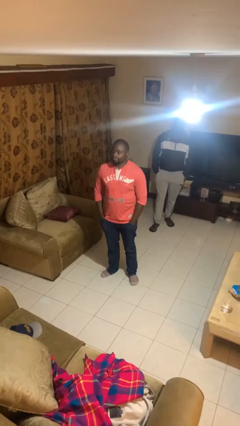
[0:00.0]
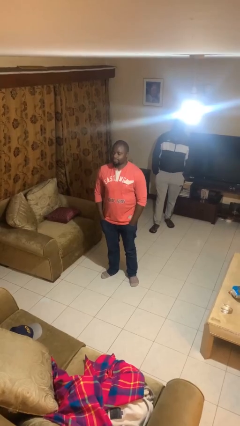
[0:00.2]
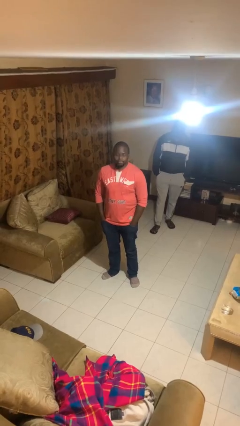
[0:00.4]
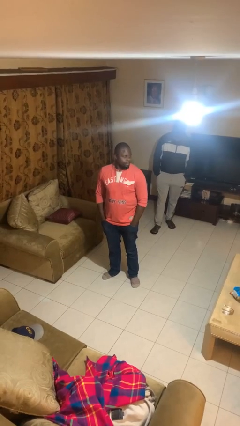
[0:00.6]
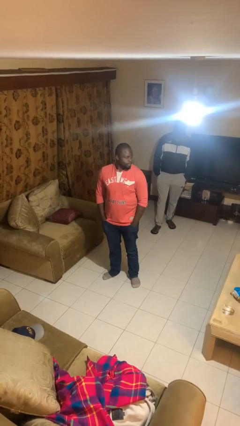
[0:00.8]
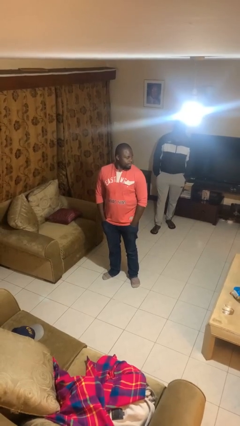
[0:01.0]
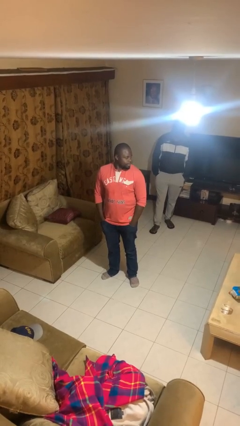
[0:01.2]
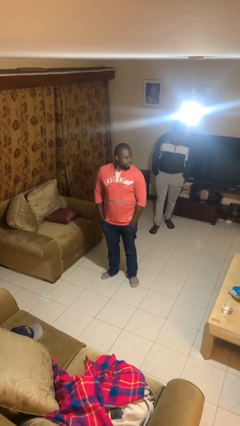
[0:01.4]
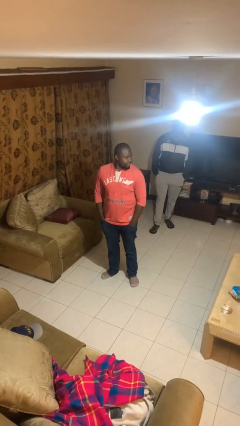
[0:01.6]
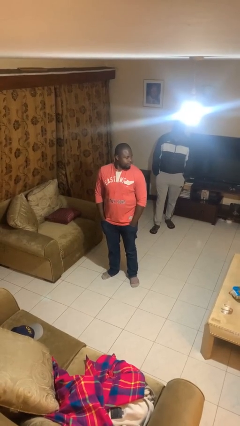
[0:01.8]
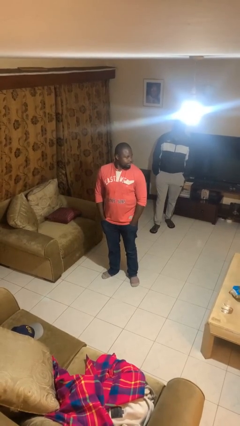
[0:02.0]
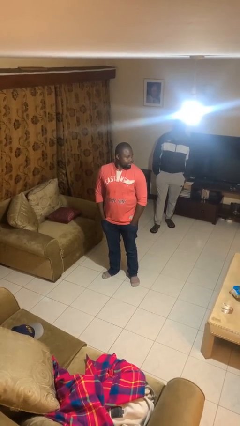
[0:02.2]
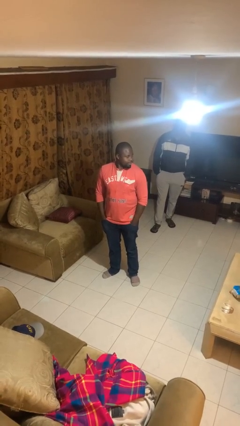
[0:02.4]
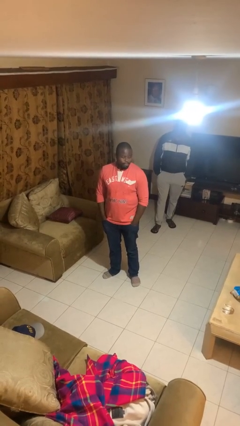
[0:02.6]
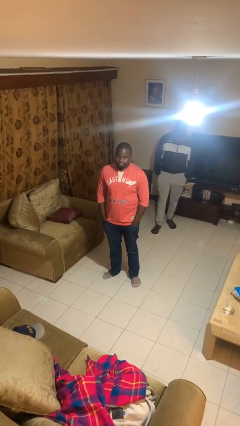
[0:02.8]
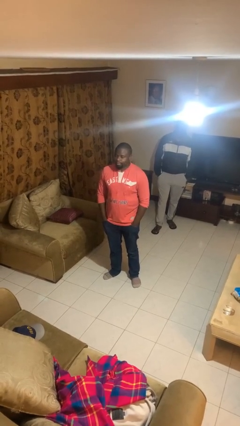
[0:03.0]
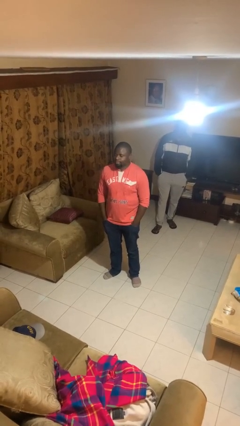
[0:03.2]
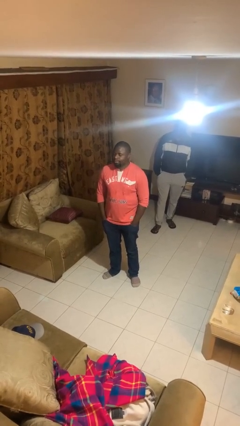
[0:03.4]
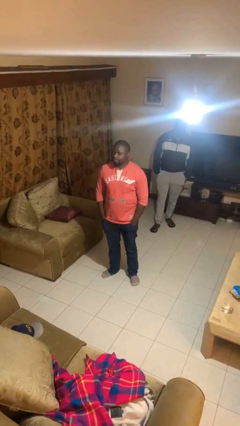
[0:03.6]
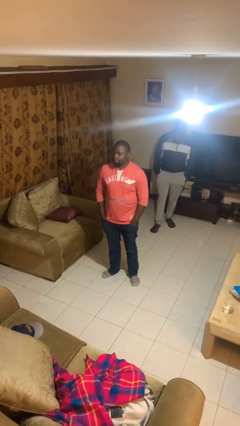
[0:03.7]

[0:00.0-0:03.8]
person looks over shoulder

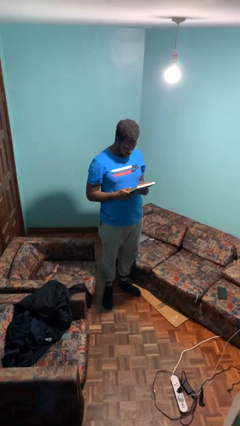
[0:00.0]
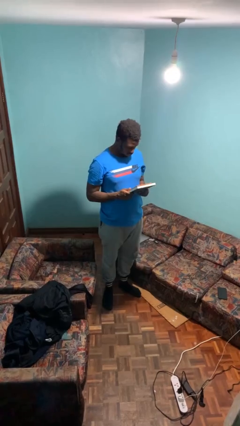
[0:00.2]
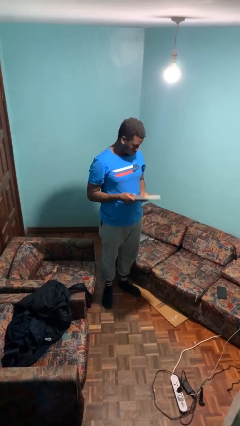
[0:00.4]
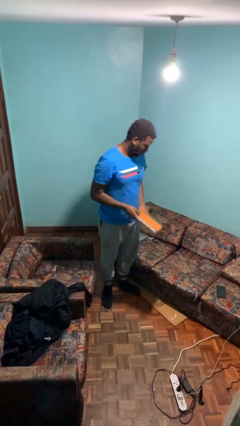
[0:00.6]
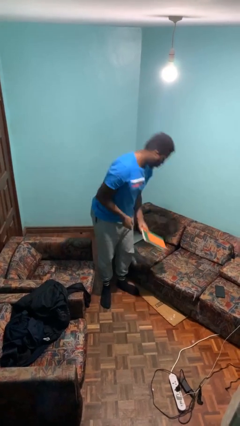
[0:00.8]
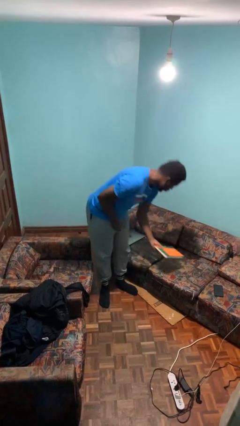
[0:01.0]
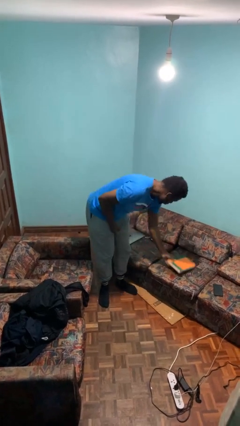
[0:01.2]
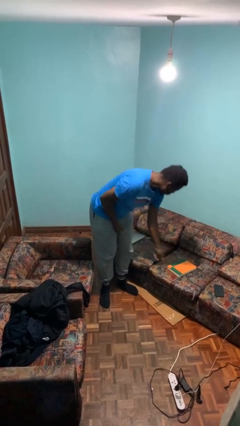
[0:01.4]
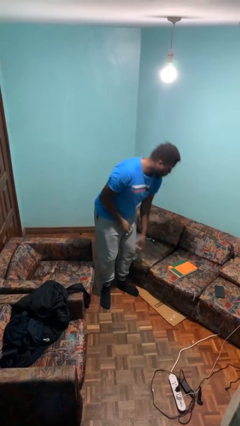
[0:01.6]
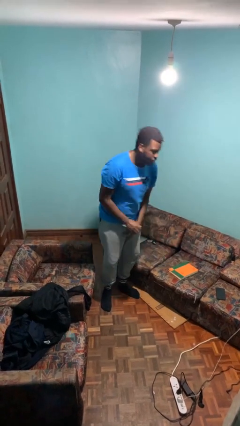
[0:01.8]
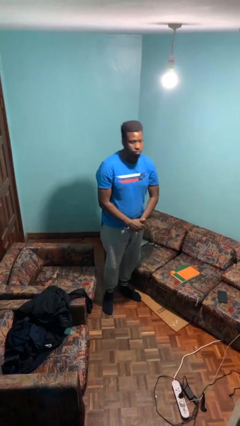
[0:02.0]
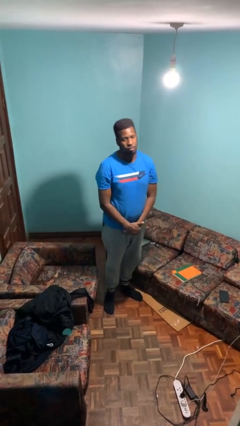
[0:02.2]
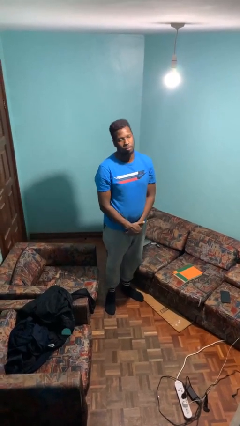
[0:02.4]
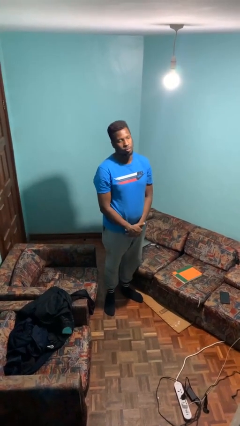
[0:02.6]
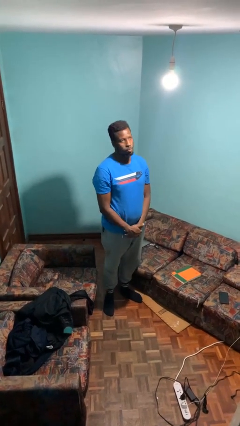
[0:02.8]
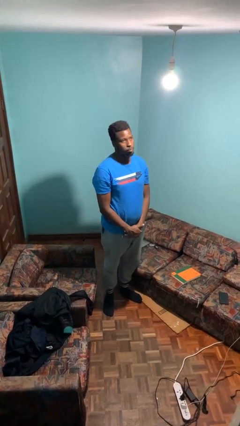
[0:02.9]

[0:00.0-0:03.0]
person puts down object on couch

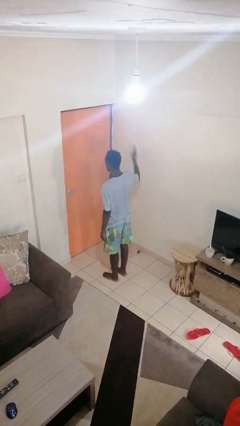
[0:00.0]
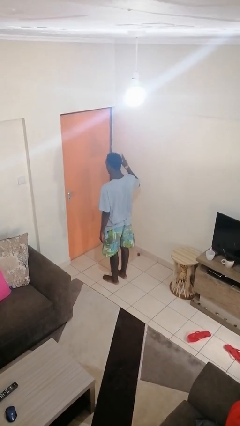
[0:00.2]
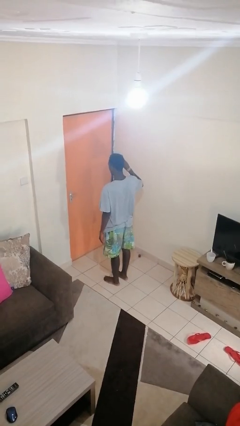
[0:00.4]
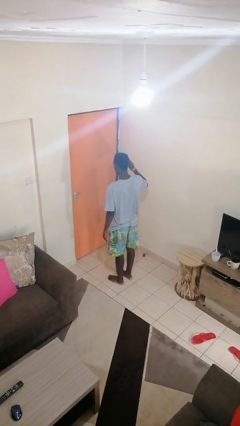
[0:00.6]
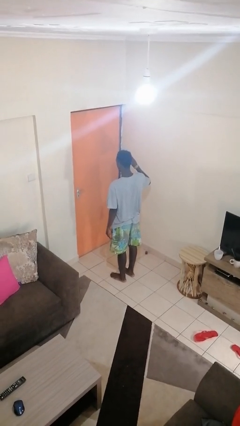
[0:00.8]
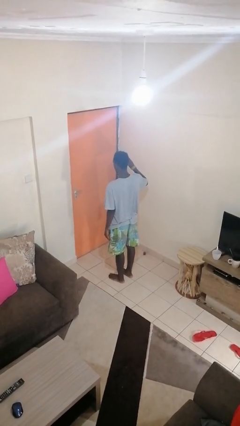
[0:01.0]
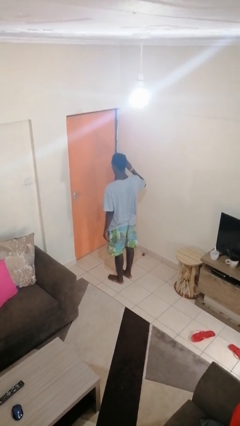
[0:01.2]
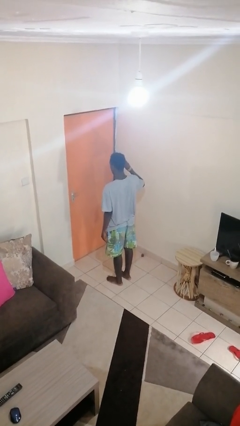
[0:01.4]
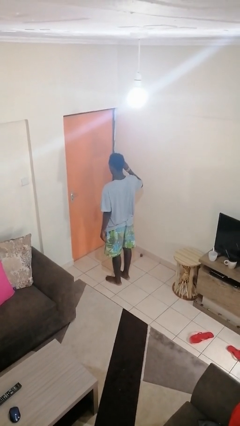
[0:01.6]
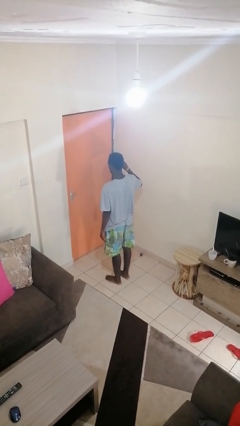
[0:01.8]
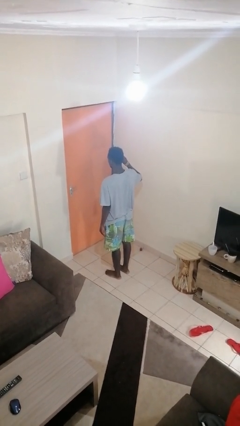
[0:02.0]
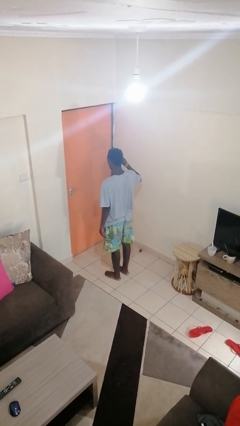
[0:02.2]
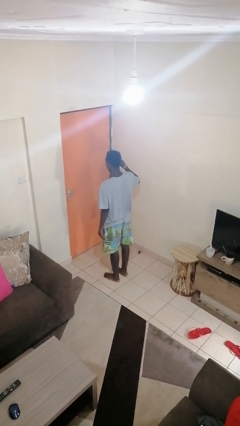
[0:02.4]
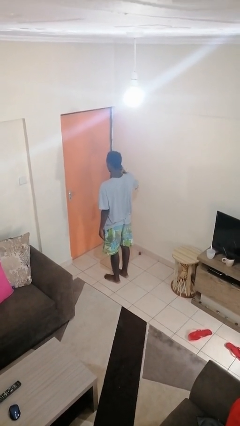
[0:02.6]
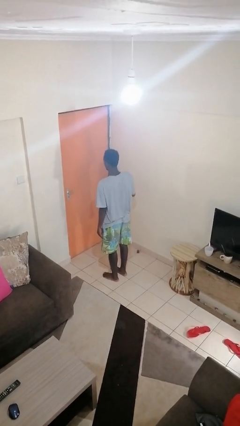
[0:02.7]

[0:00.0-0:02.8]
person salutes

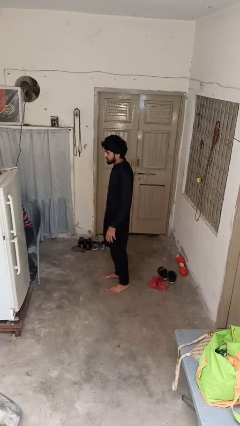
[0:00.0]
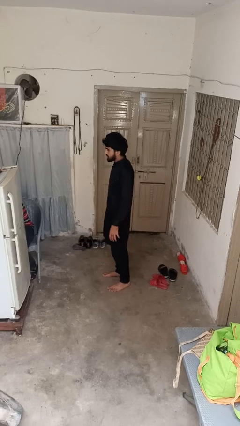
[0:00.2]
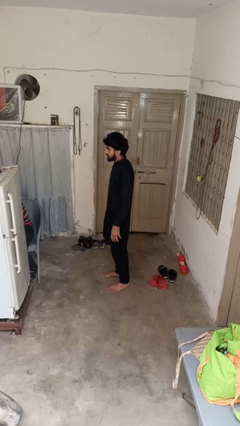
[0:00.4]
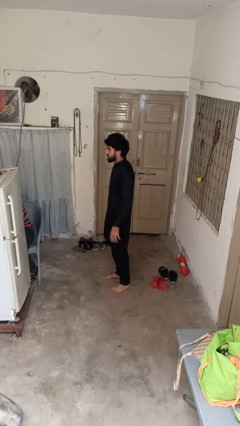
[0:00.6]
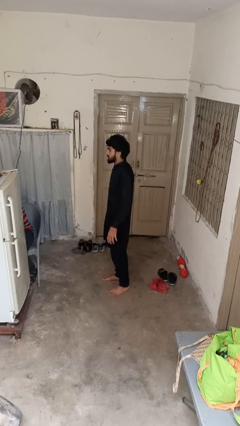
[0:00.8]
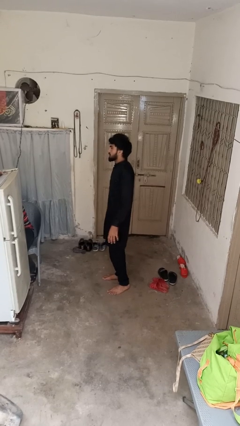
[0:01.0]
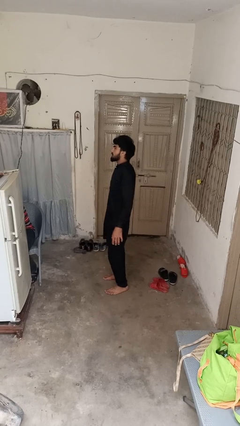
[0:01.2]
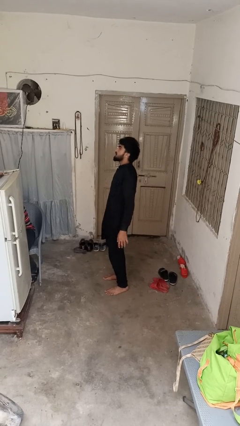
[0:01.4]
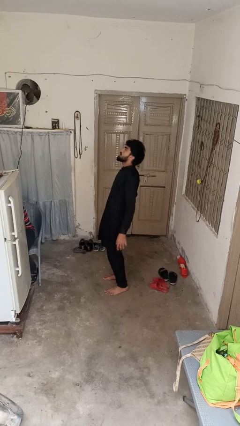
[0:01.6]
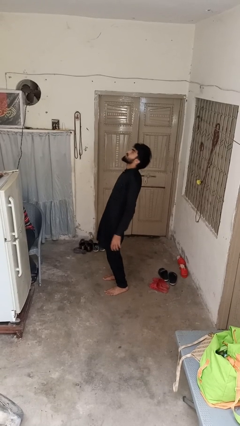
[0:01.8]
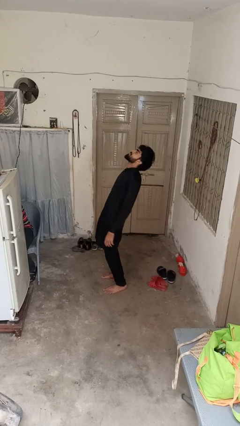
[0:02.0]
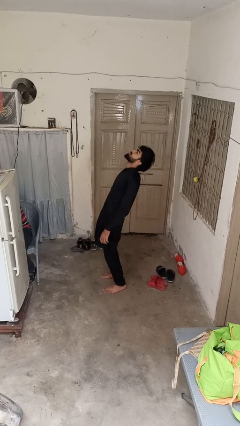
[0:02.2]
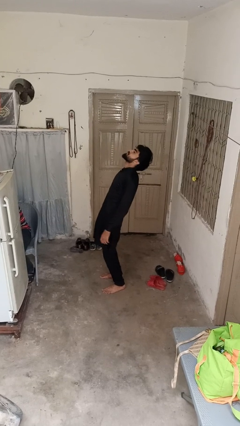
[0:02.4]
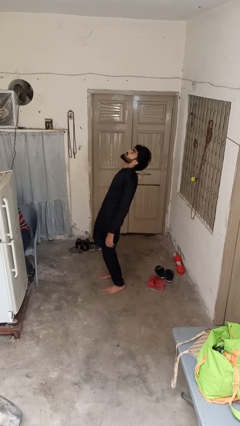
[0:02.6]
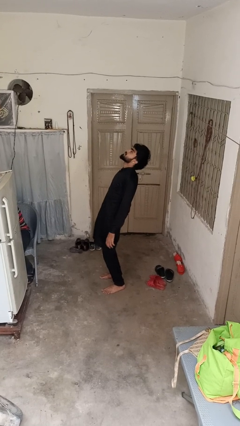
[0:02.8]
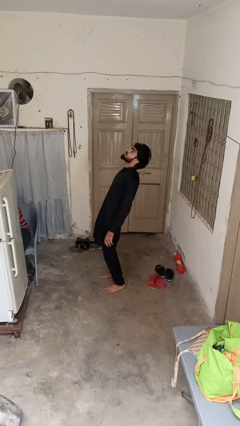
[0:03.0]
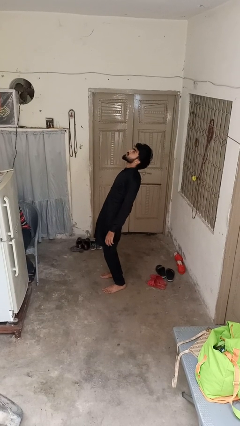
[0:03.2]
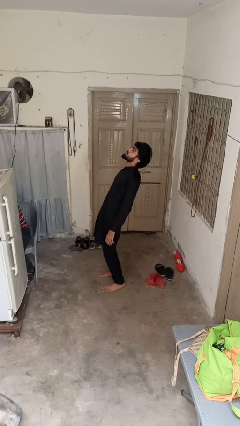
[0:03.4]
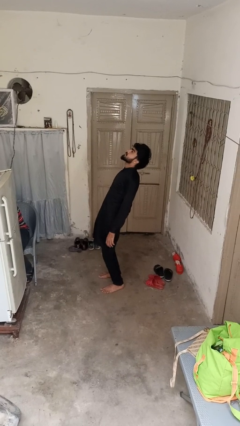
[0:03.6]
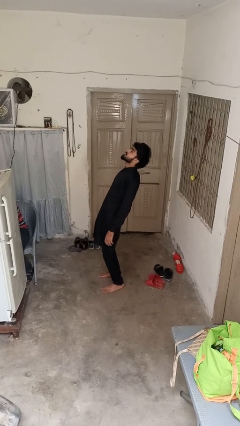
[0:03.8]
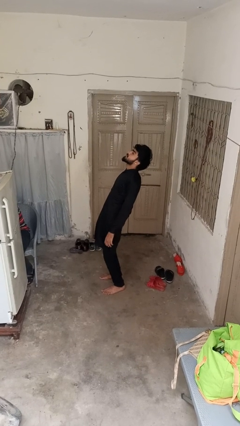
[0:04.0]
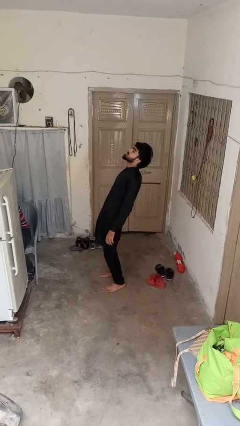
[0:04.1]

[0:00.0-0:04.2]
person stretches back

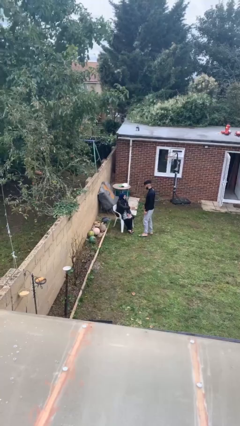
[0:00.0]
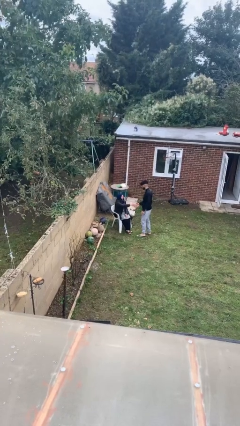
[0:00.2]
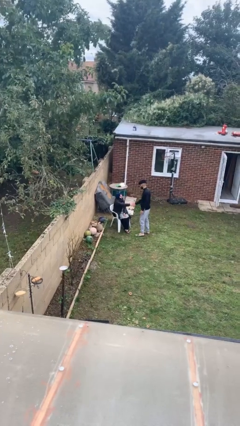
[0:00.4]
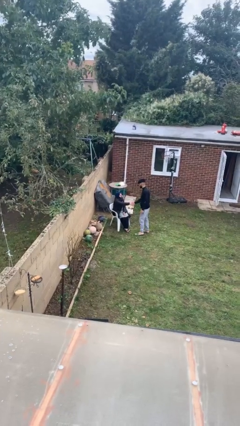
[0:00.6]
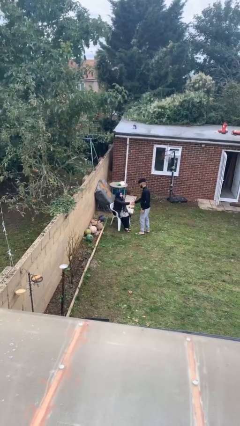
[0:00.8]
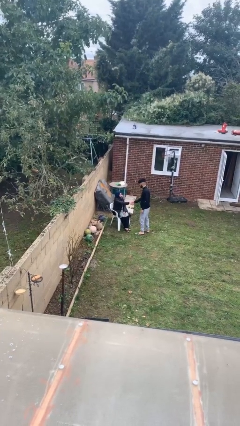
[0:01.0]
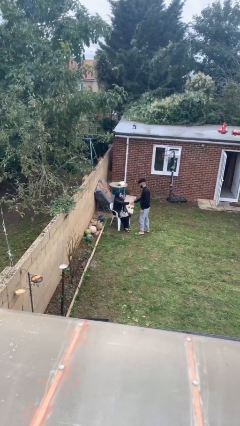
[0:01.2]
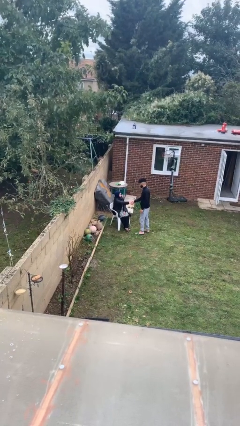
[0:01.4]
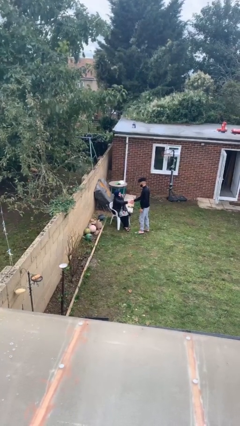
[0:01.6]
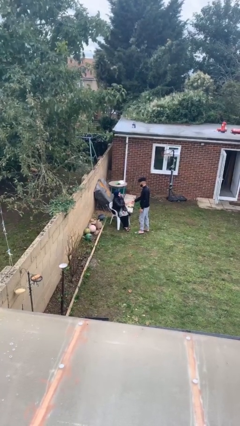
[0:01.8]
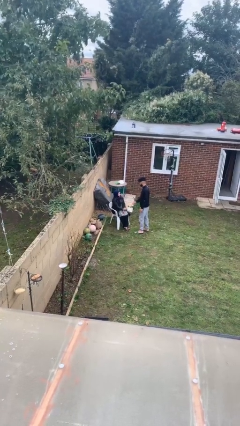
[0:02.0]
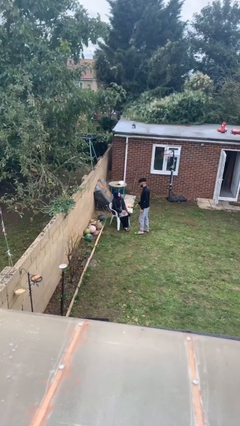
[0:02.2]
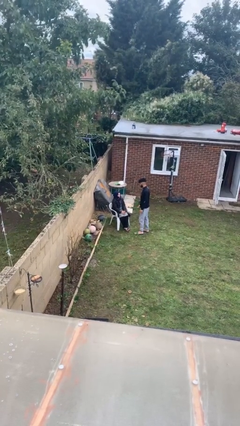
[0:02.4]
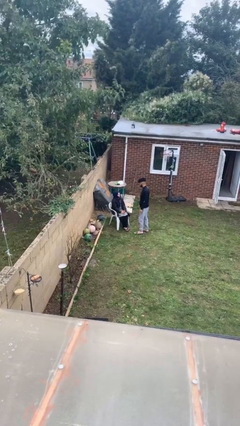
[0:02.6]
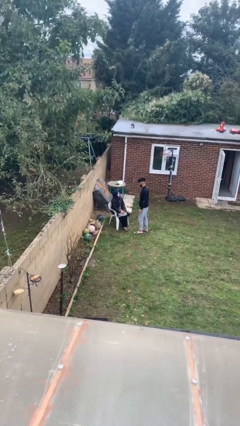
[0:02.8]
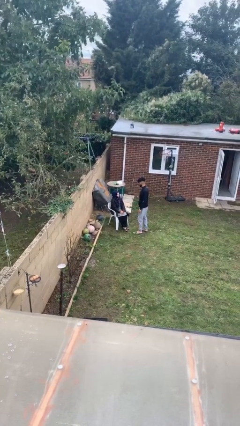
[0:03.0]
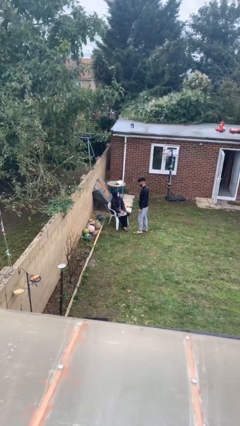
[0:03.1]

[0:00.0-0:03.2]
person shakes hand

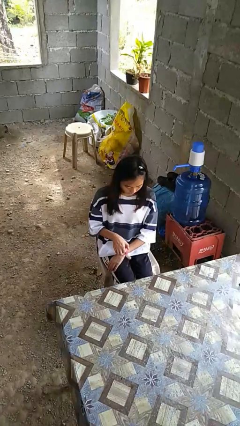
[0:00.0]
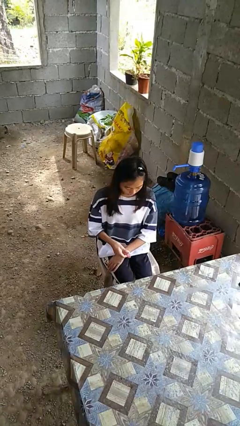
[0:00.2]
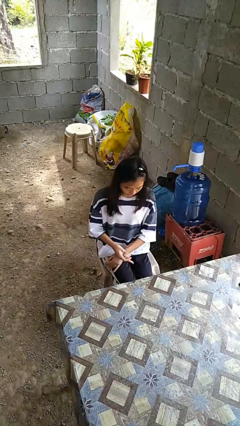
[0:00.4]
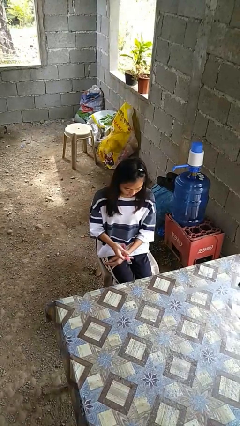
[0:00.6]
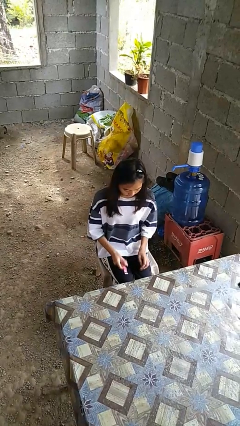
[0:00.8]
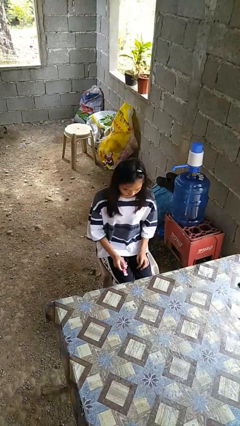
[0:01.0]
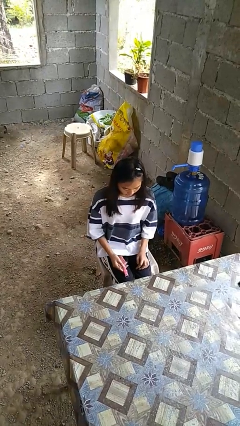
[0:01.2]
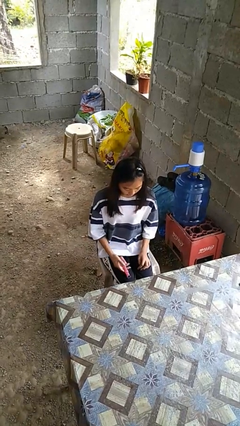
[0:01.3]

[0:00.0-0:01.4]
person takes off wristwatch
